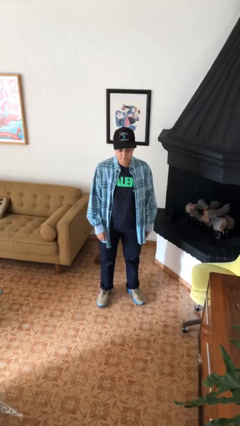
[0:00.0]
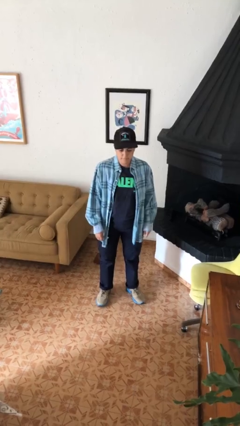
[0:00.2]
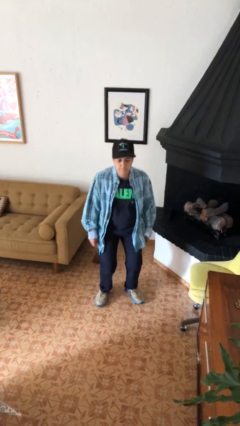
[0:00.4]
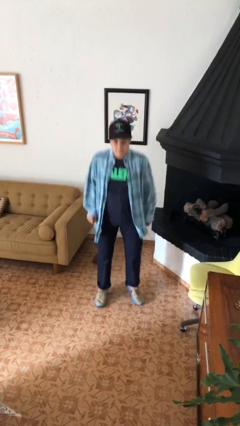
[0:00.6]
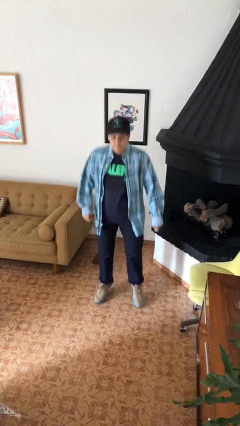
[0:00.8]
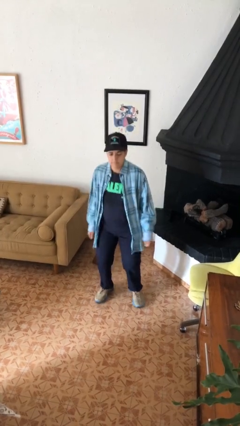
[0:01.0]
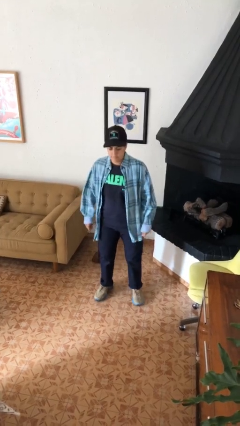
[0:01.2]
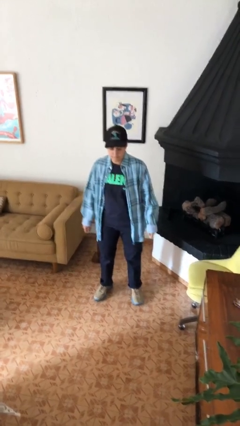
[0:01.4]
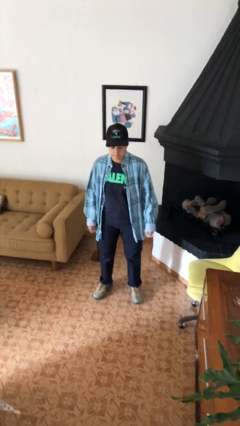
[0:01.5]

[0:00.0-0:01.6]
person jumps

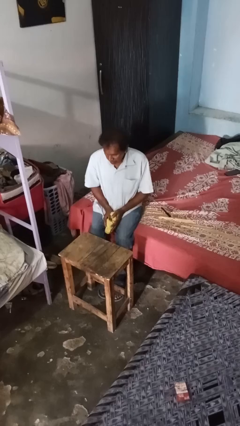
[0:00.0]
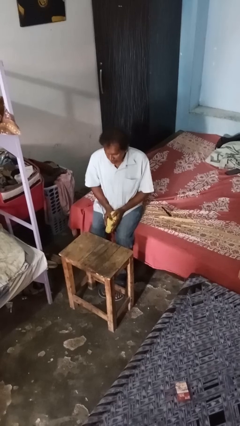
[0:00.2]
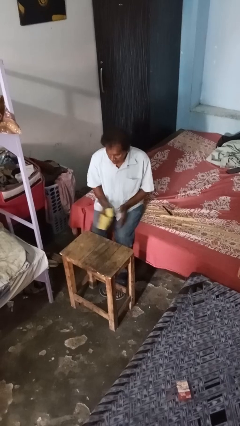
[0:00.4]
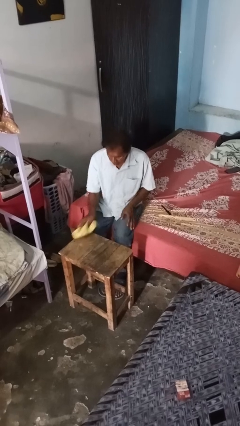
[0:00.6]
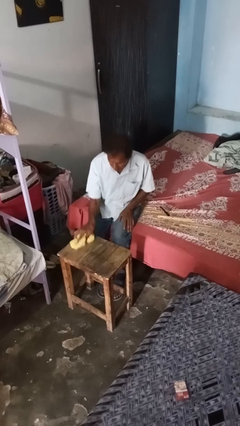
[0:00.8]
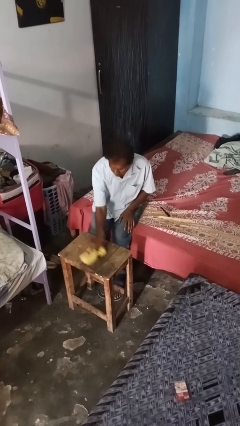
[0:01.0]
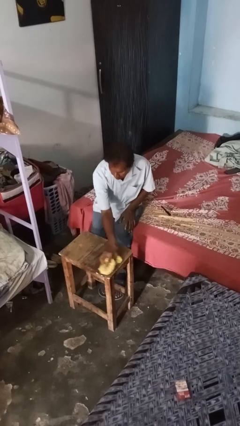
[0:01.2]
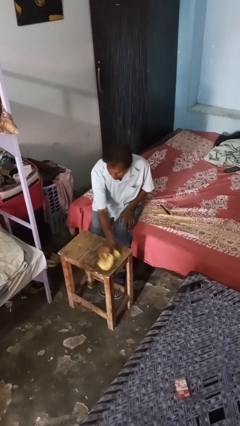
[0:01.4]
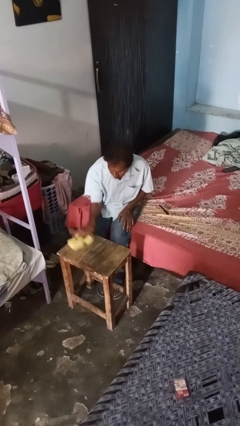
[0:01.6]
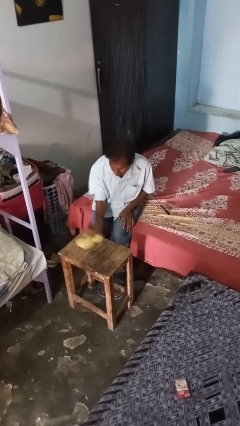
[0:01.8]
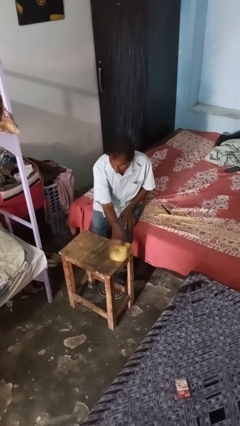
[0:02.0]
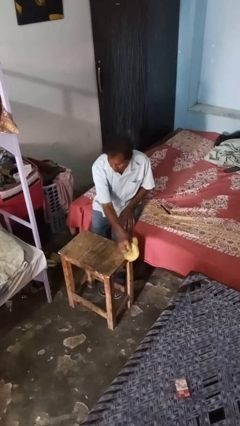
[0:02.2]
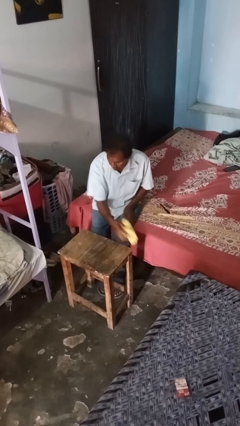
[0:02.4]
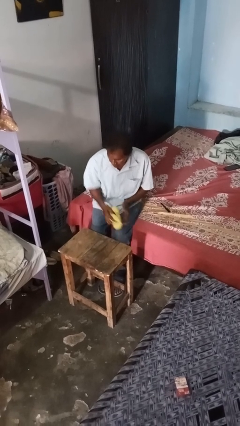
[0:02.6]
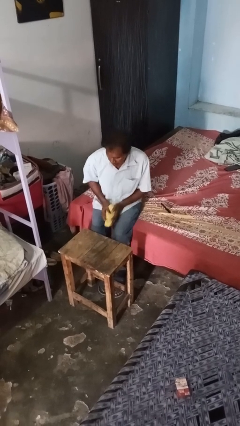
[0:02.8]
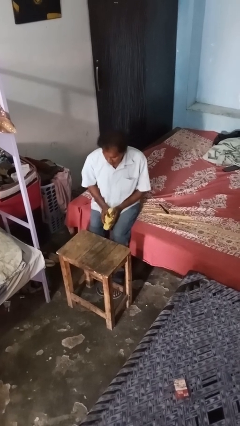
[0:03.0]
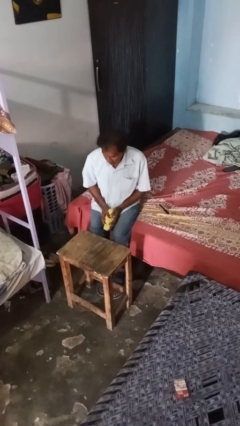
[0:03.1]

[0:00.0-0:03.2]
person cleans table with rag

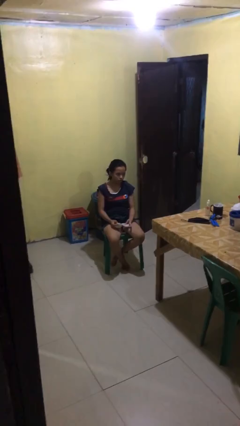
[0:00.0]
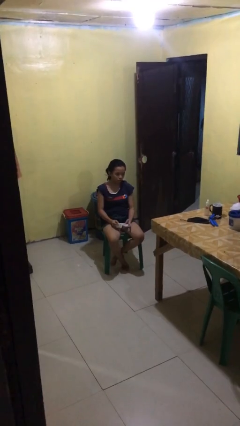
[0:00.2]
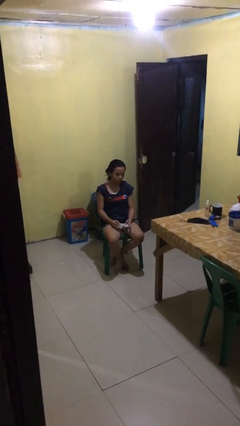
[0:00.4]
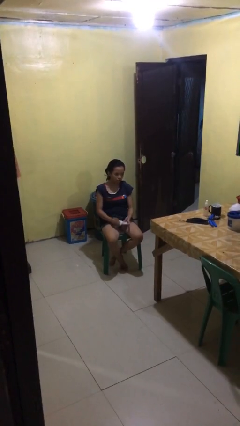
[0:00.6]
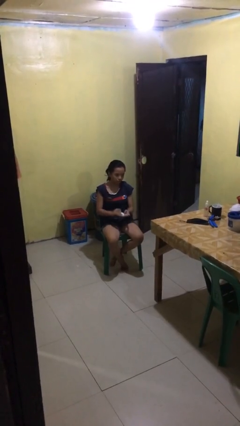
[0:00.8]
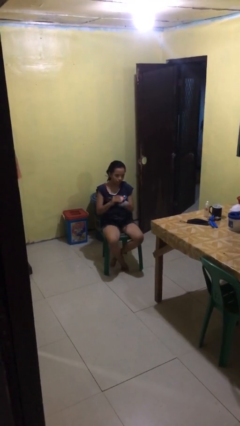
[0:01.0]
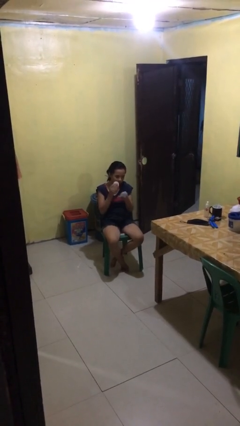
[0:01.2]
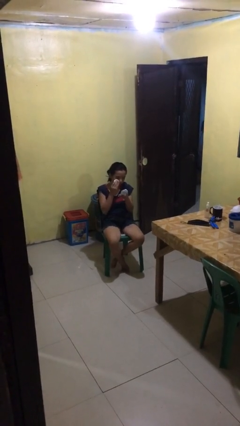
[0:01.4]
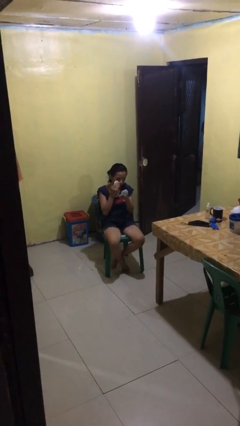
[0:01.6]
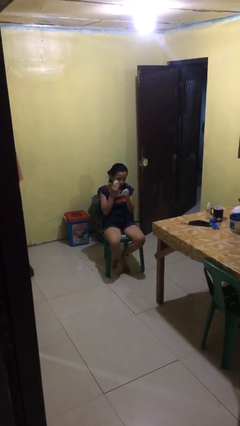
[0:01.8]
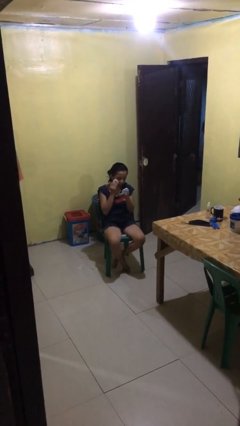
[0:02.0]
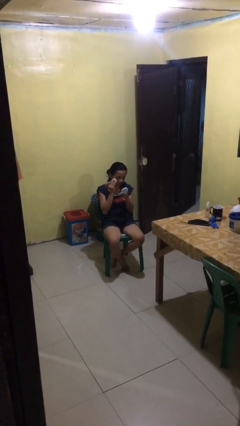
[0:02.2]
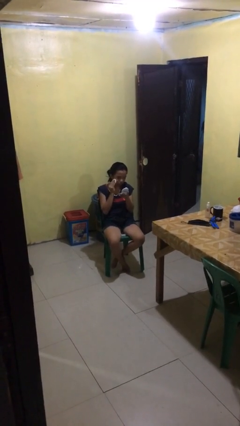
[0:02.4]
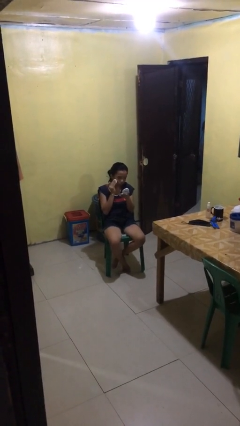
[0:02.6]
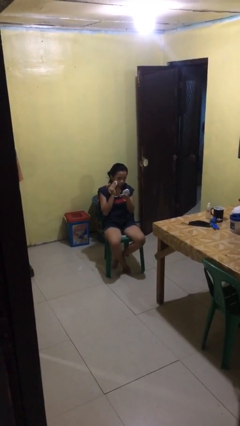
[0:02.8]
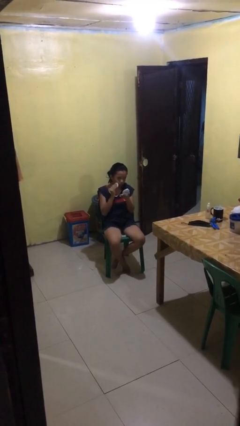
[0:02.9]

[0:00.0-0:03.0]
person applies foundation makeup

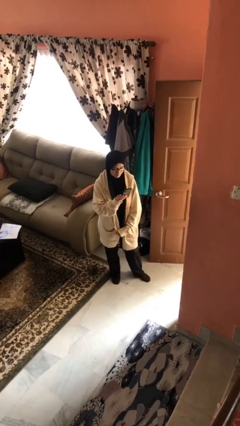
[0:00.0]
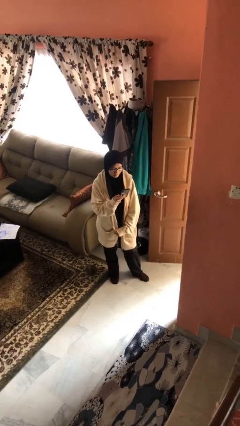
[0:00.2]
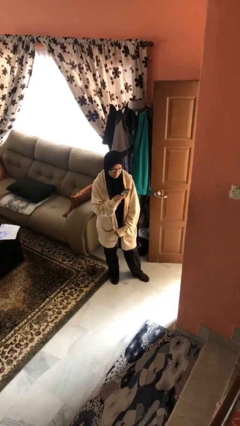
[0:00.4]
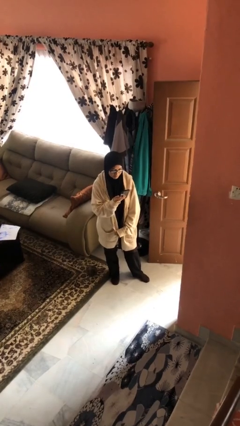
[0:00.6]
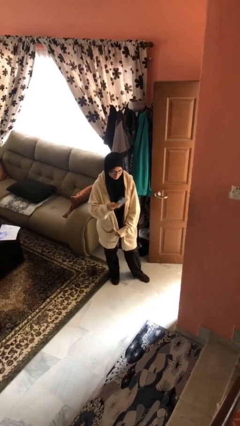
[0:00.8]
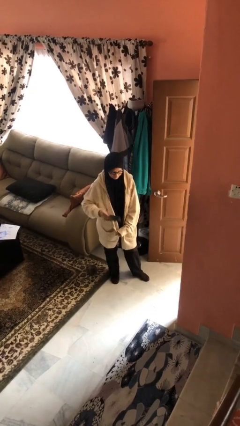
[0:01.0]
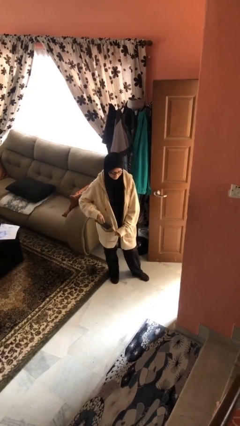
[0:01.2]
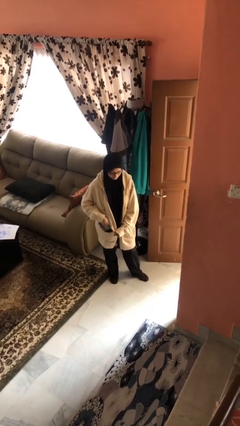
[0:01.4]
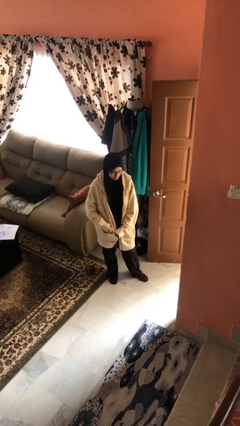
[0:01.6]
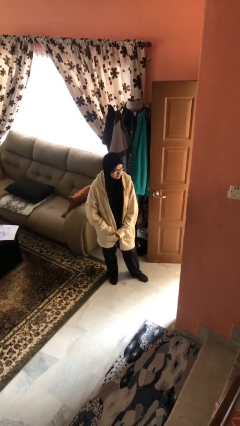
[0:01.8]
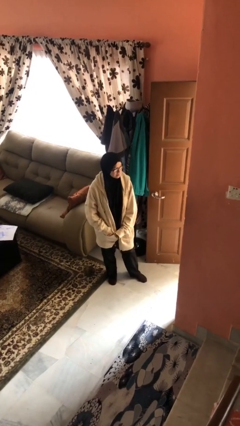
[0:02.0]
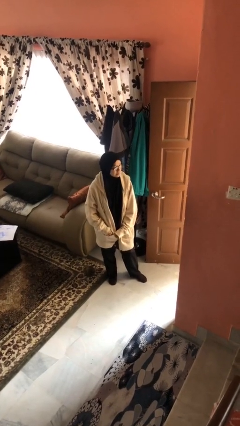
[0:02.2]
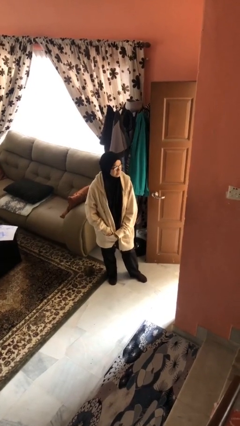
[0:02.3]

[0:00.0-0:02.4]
person puts phone into pocket

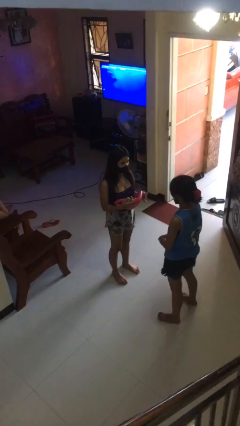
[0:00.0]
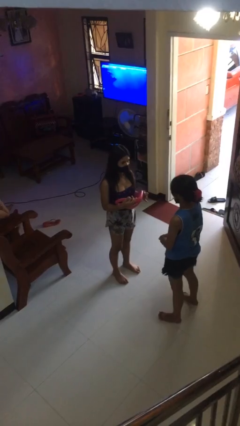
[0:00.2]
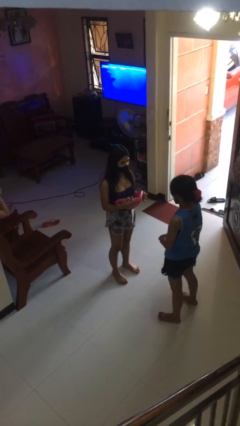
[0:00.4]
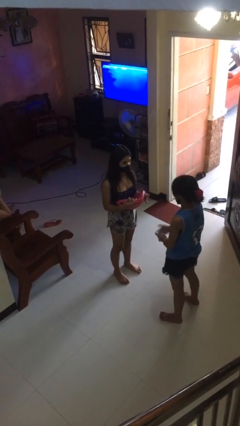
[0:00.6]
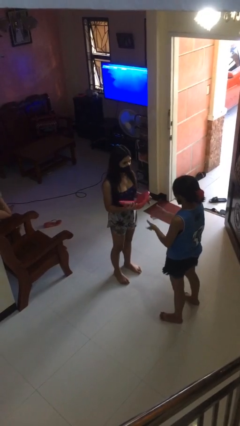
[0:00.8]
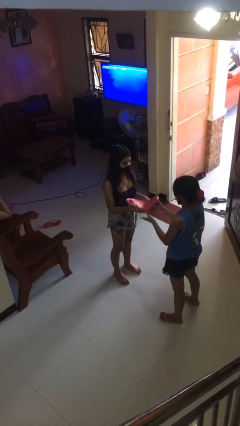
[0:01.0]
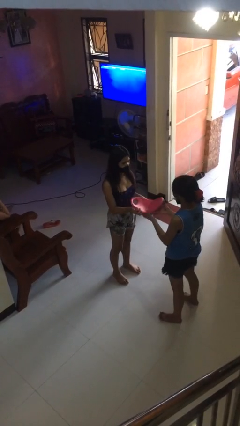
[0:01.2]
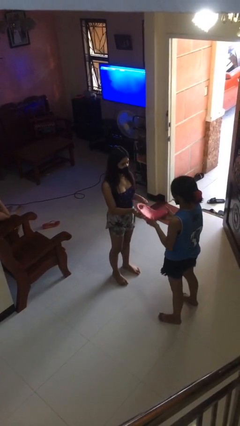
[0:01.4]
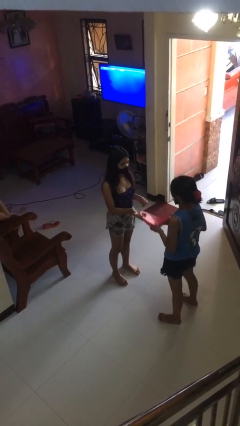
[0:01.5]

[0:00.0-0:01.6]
person transfers object to person

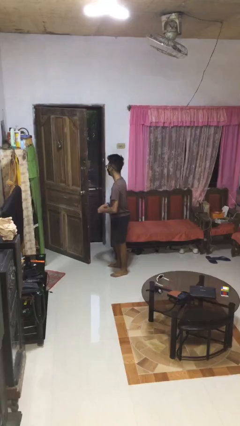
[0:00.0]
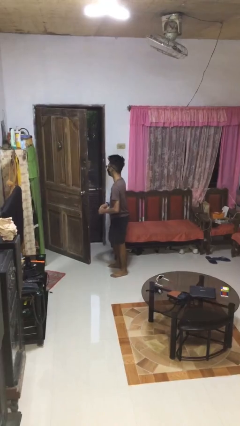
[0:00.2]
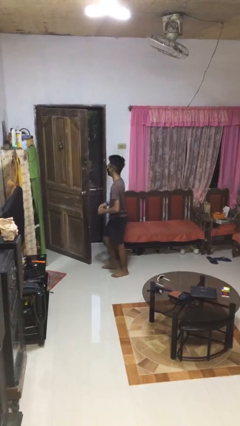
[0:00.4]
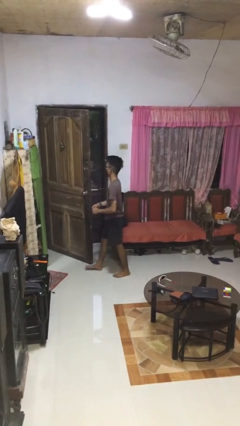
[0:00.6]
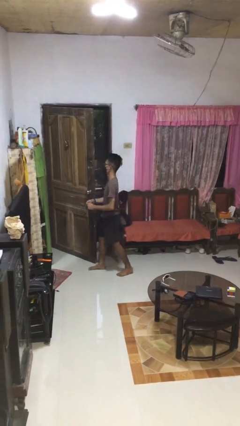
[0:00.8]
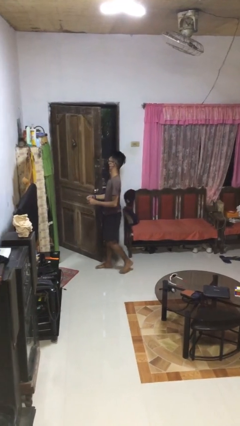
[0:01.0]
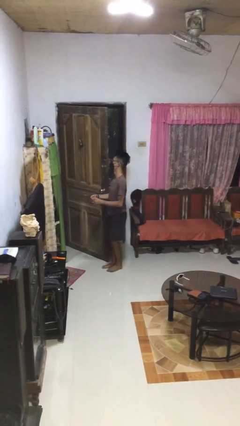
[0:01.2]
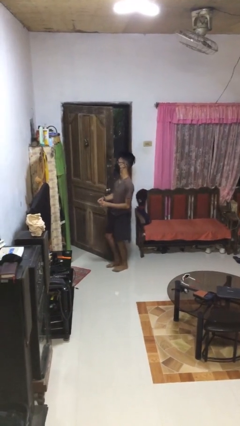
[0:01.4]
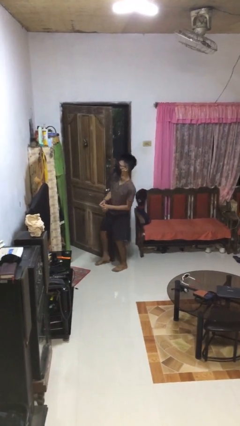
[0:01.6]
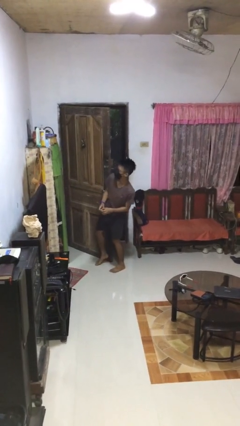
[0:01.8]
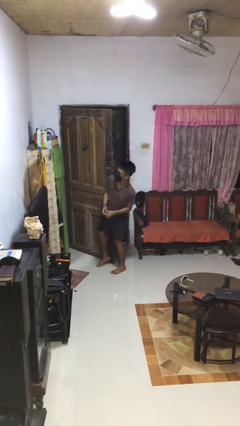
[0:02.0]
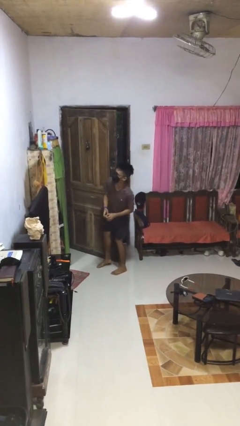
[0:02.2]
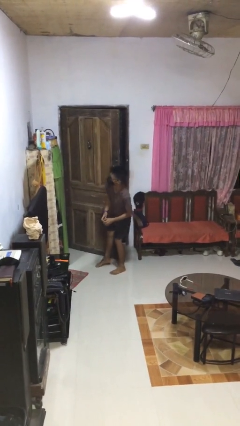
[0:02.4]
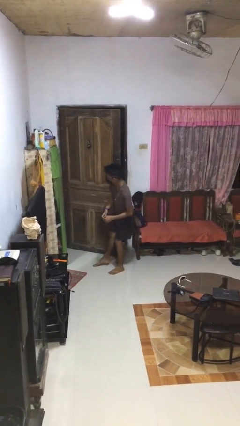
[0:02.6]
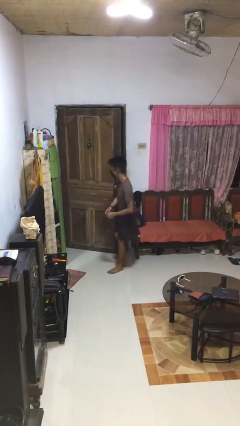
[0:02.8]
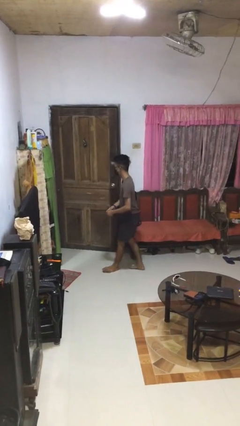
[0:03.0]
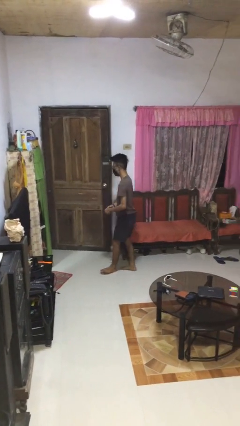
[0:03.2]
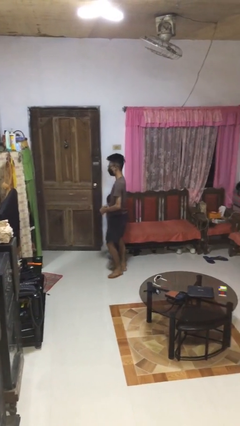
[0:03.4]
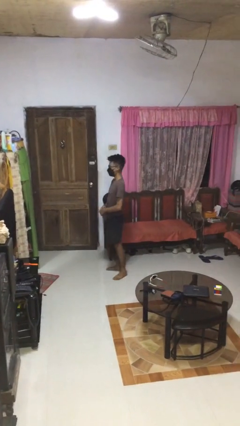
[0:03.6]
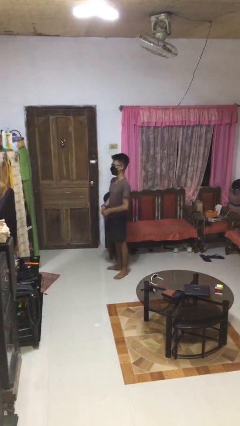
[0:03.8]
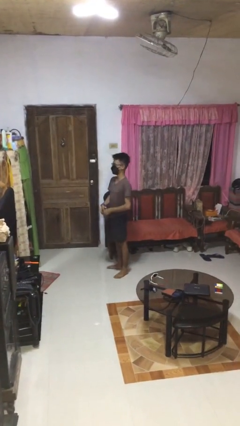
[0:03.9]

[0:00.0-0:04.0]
person closes door with hip

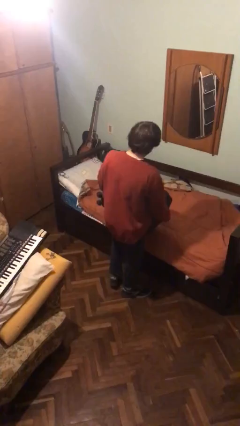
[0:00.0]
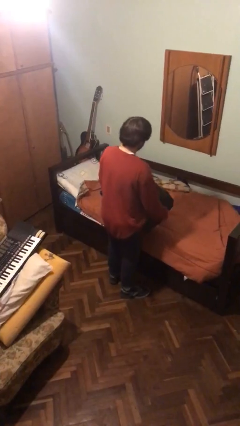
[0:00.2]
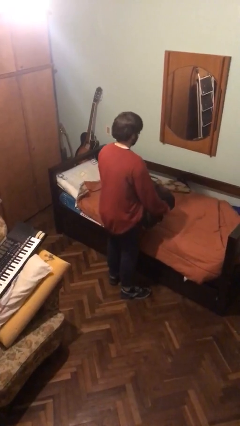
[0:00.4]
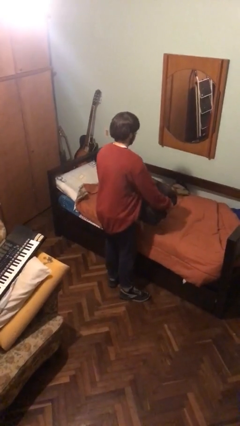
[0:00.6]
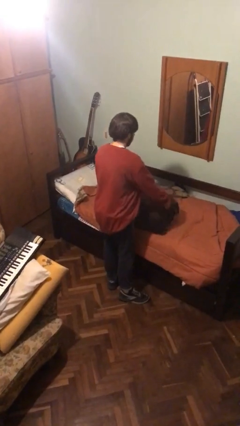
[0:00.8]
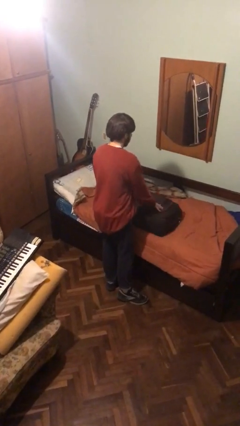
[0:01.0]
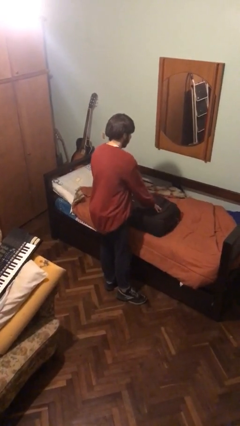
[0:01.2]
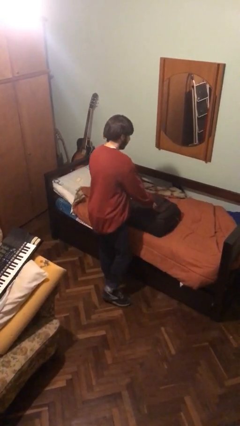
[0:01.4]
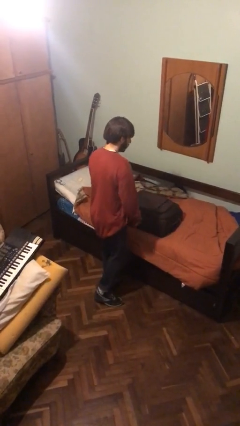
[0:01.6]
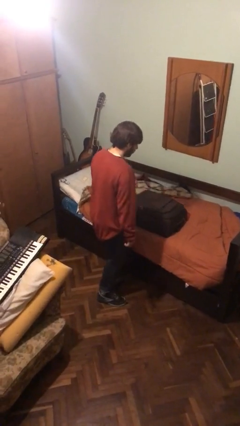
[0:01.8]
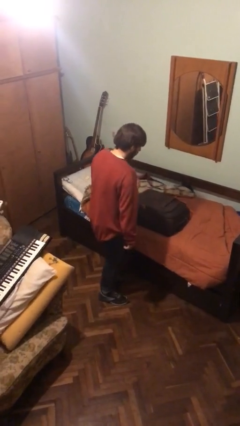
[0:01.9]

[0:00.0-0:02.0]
person puts down object on bed
